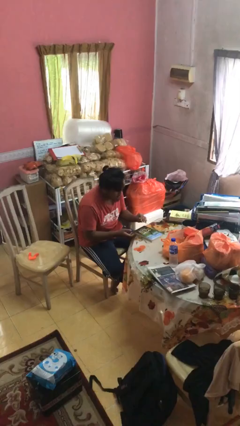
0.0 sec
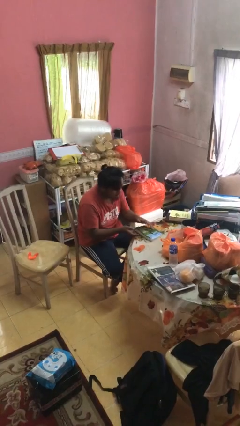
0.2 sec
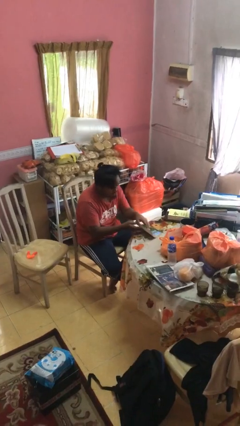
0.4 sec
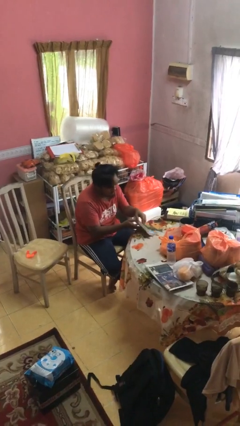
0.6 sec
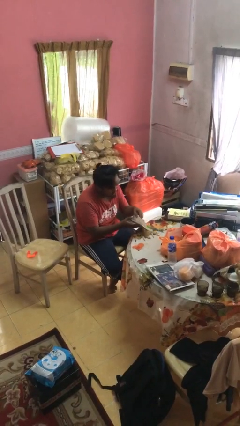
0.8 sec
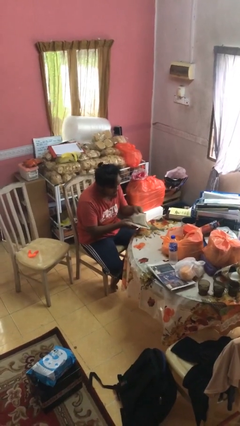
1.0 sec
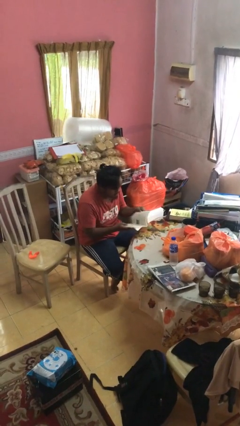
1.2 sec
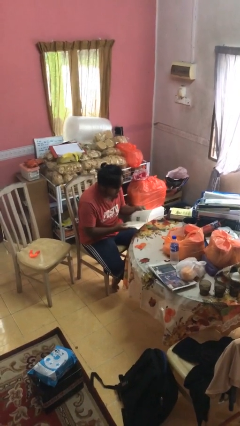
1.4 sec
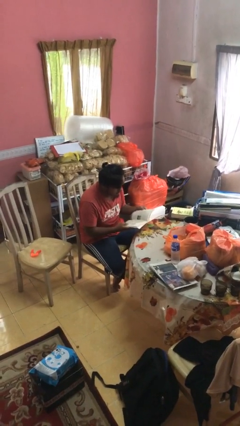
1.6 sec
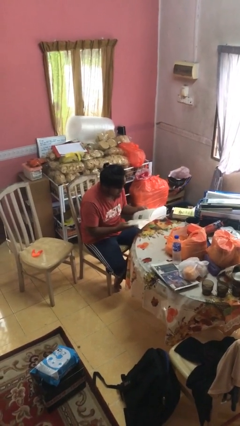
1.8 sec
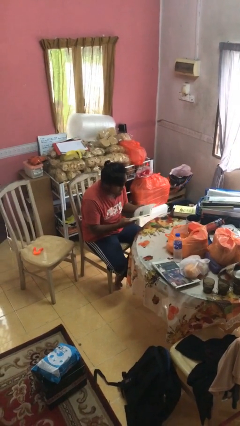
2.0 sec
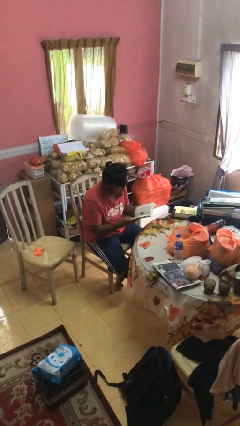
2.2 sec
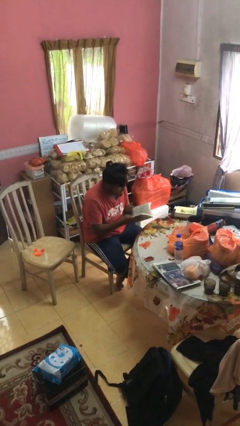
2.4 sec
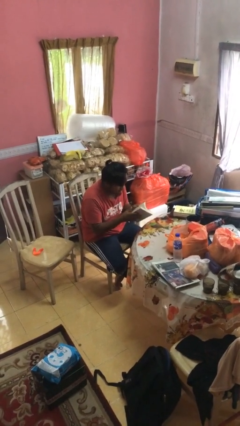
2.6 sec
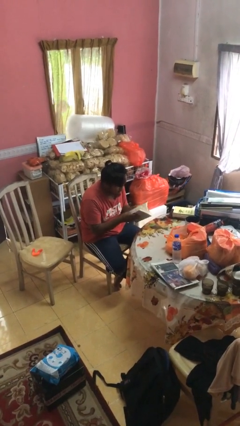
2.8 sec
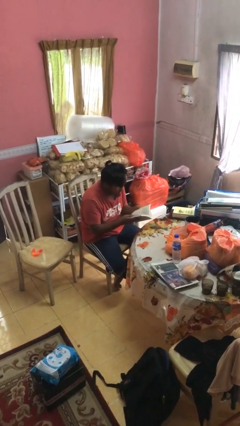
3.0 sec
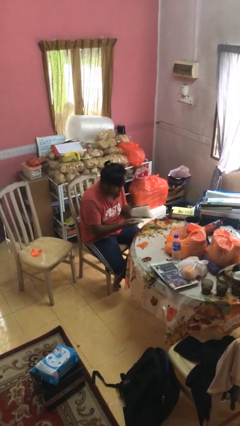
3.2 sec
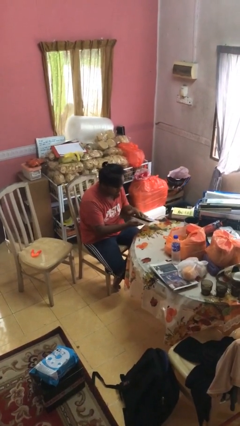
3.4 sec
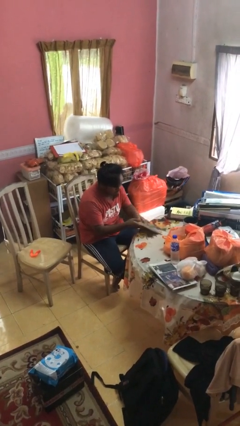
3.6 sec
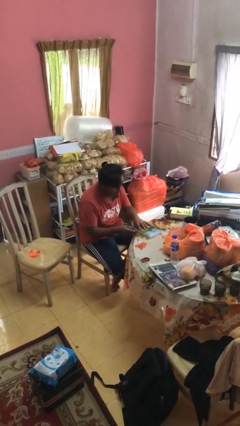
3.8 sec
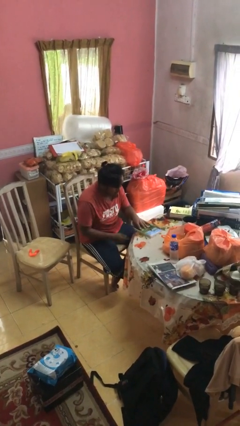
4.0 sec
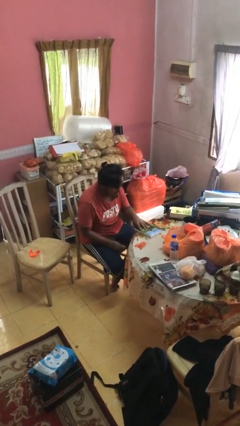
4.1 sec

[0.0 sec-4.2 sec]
person reads book

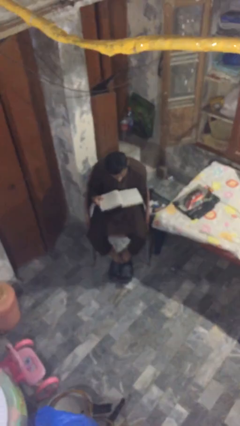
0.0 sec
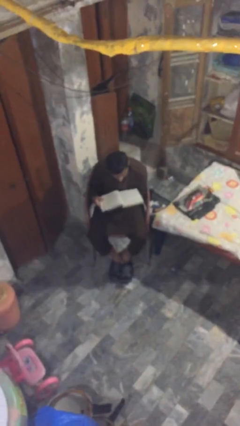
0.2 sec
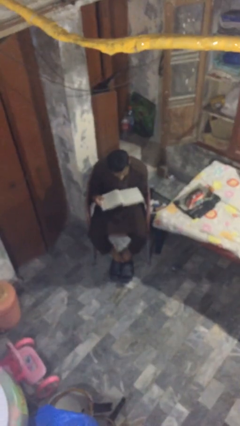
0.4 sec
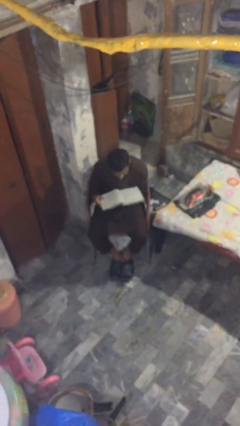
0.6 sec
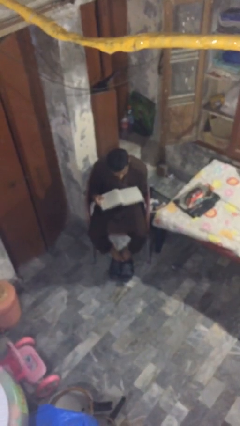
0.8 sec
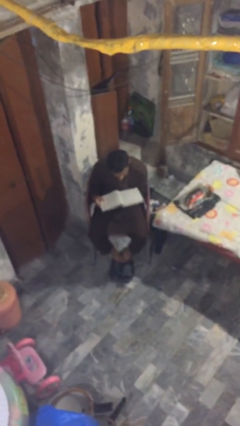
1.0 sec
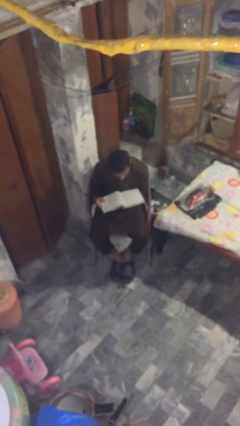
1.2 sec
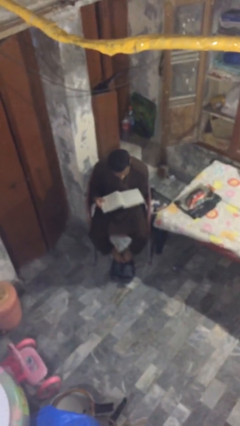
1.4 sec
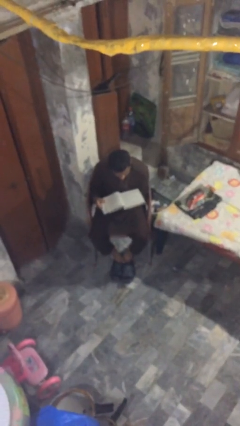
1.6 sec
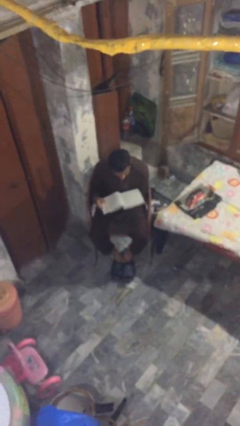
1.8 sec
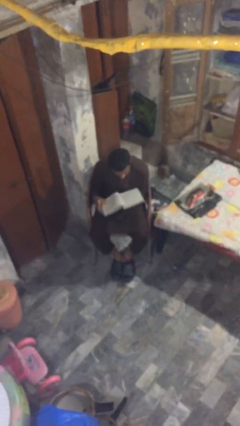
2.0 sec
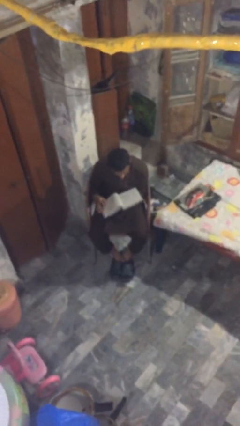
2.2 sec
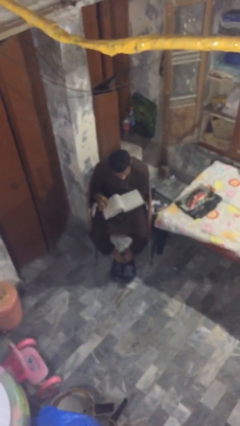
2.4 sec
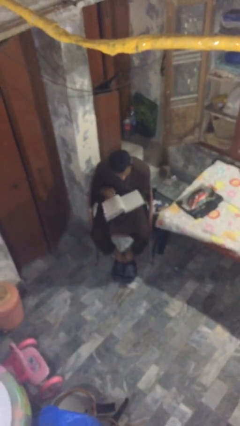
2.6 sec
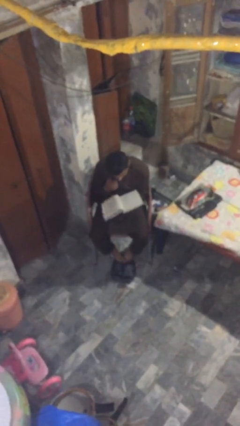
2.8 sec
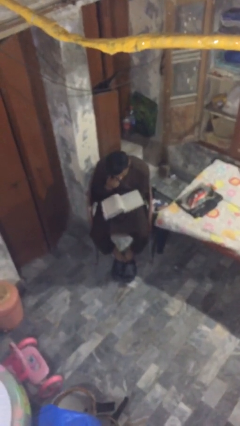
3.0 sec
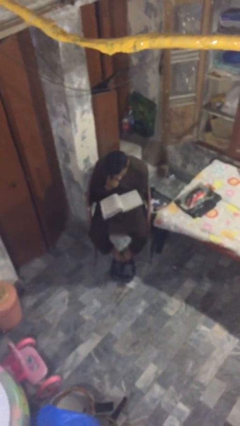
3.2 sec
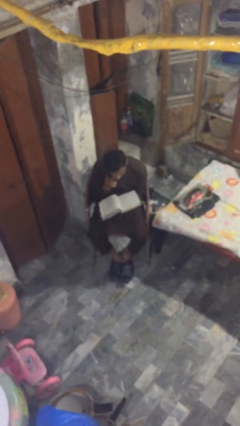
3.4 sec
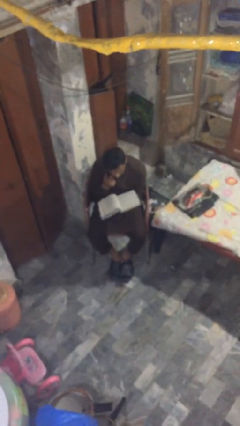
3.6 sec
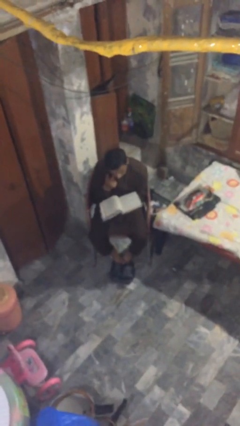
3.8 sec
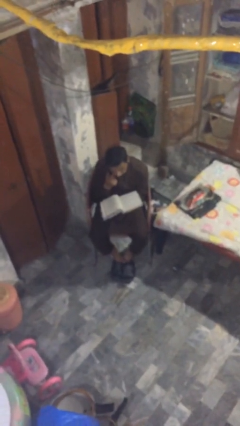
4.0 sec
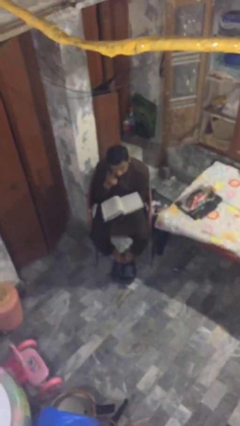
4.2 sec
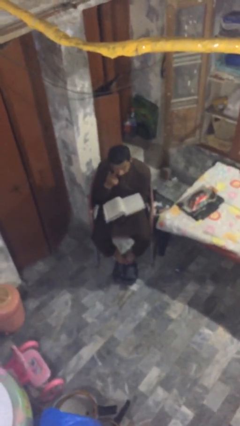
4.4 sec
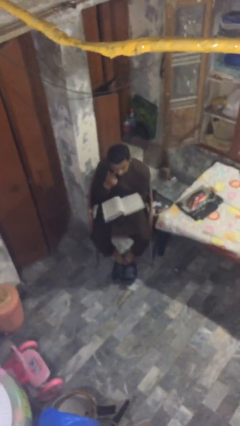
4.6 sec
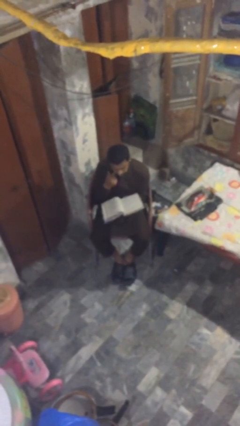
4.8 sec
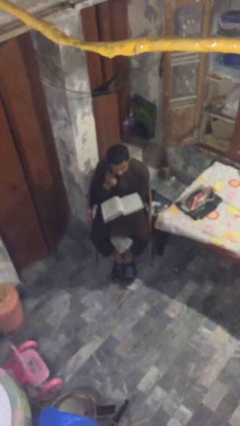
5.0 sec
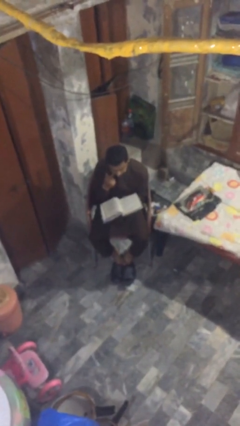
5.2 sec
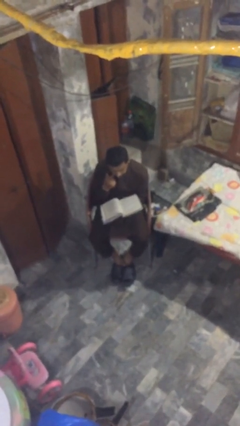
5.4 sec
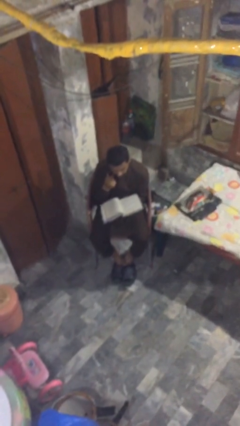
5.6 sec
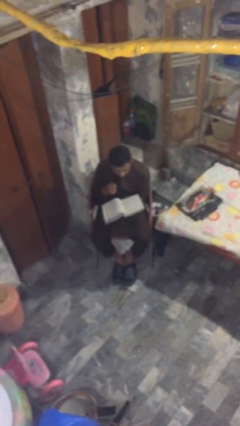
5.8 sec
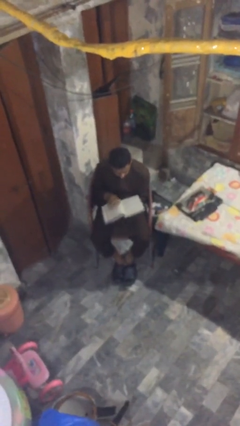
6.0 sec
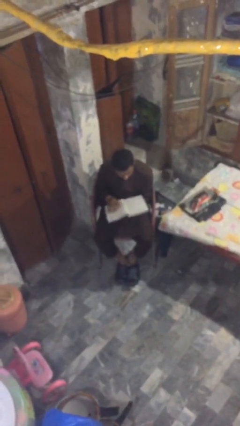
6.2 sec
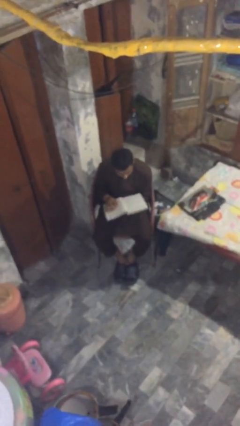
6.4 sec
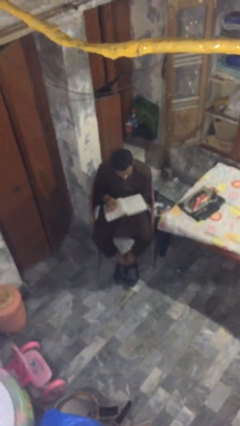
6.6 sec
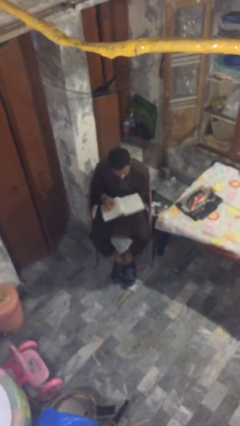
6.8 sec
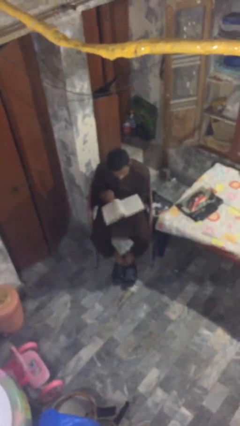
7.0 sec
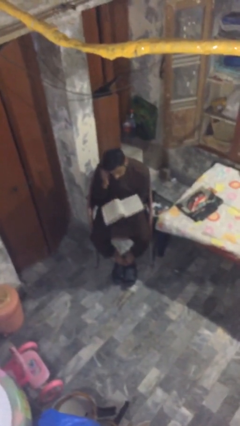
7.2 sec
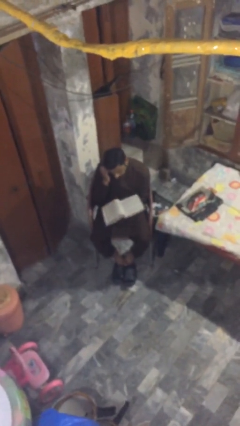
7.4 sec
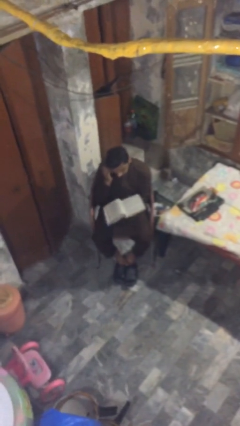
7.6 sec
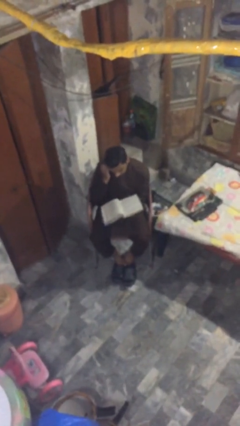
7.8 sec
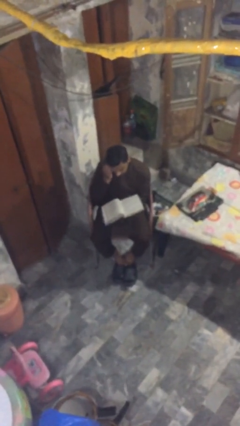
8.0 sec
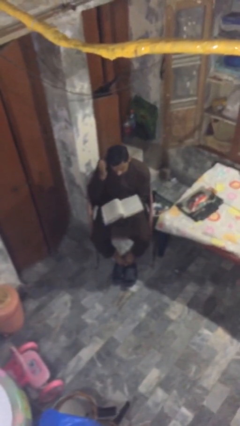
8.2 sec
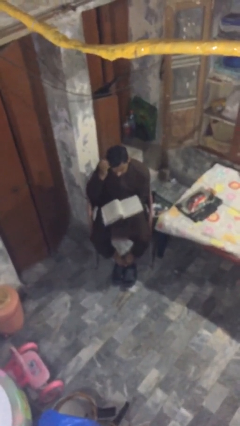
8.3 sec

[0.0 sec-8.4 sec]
person reads document

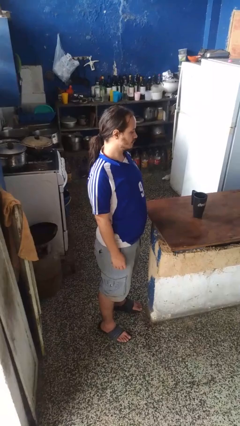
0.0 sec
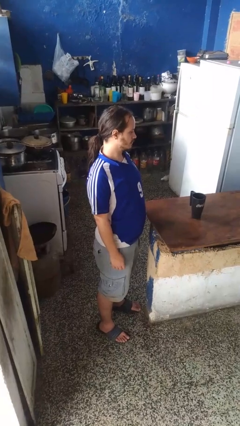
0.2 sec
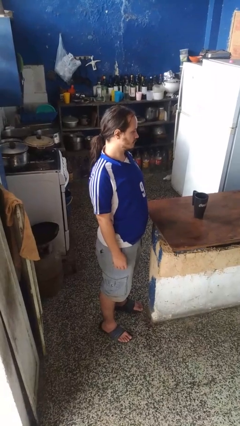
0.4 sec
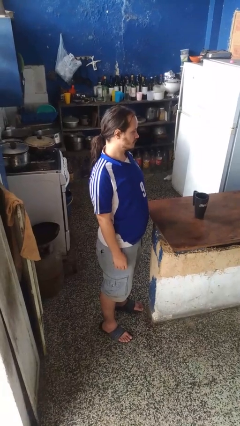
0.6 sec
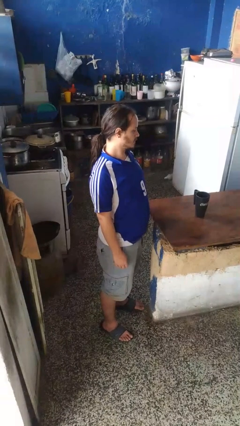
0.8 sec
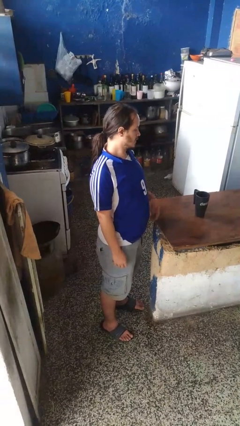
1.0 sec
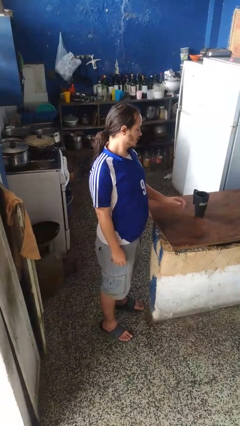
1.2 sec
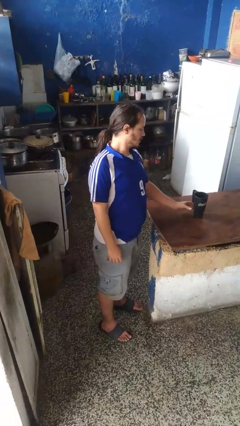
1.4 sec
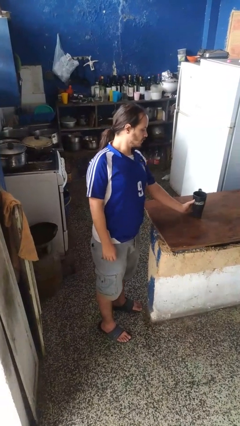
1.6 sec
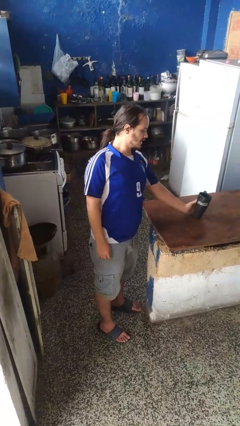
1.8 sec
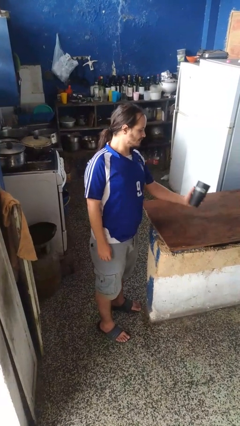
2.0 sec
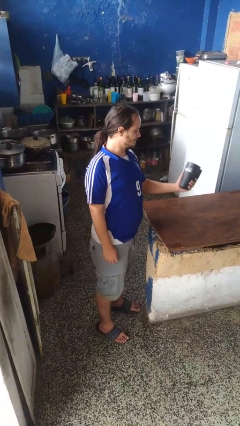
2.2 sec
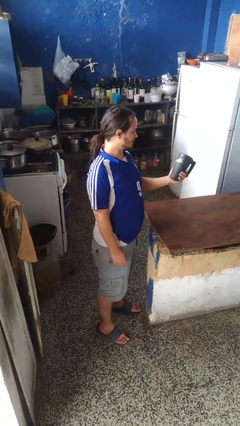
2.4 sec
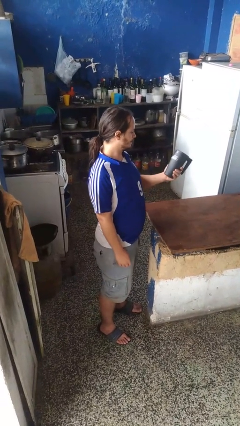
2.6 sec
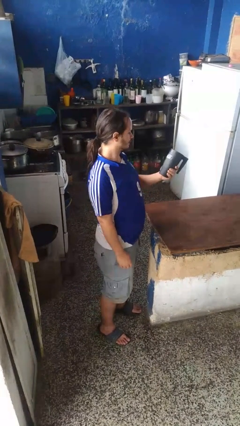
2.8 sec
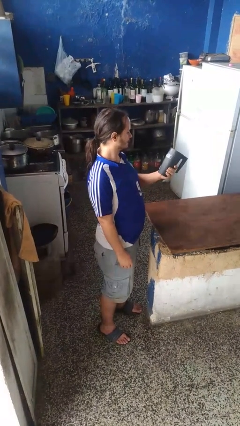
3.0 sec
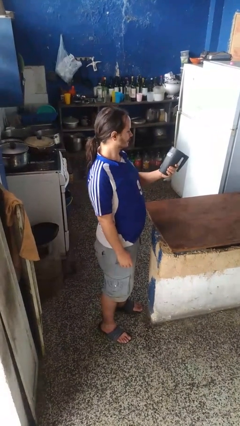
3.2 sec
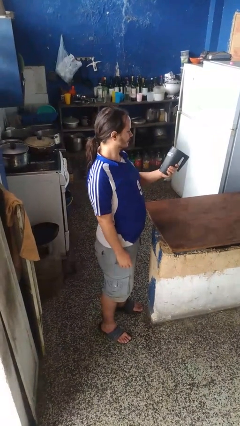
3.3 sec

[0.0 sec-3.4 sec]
person picks up object from countertop

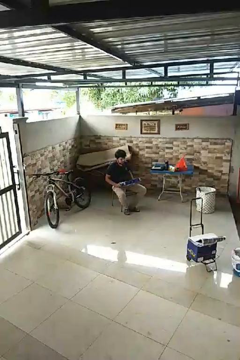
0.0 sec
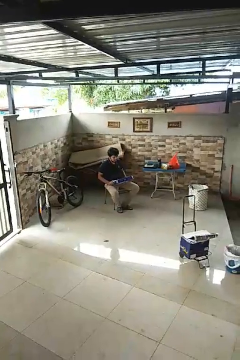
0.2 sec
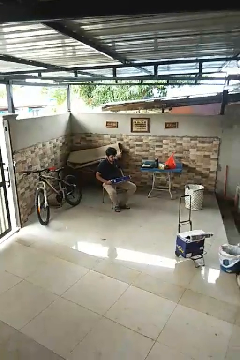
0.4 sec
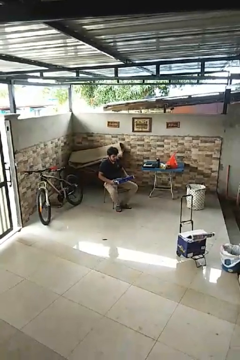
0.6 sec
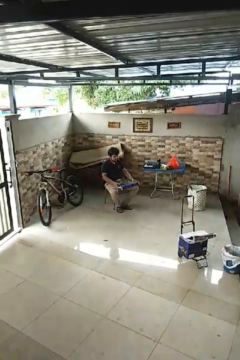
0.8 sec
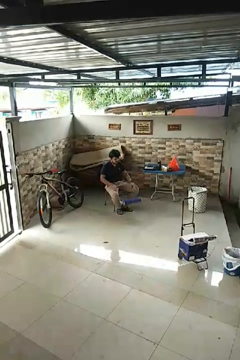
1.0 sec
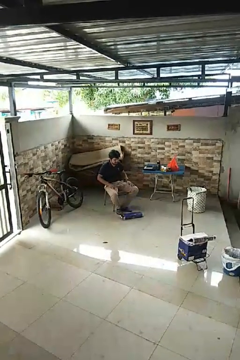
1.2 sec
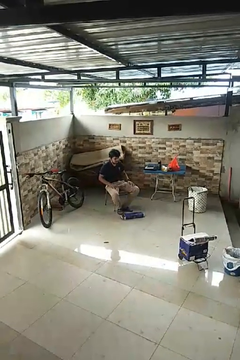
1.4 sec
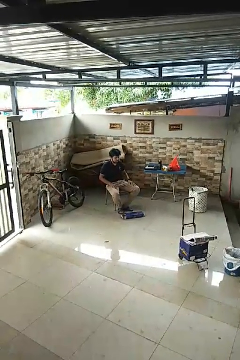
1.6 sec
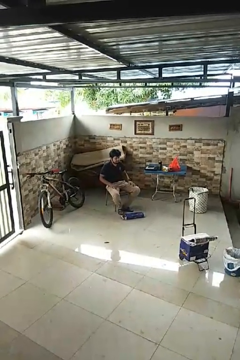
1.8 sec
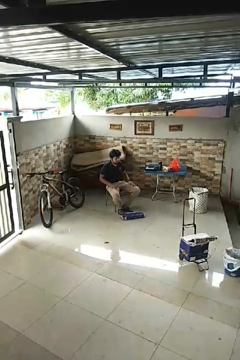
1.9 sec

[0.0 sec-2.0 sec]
person drops object
